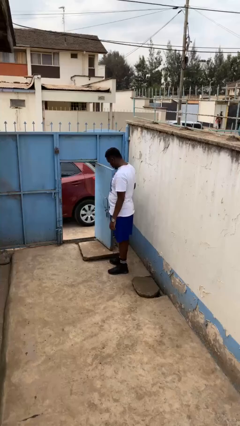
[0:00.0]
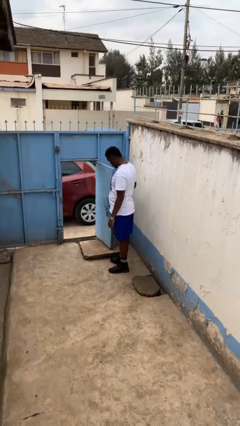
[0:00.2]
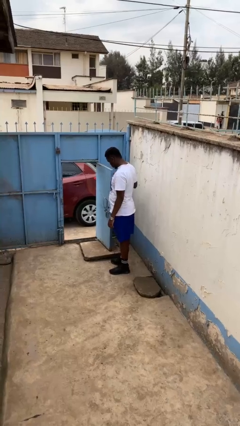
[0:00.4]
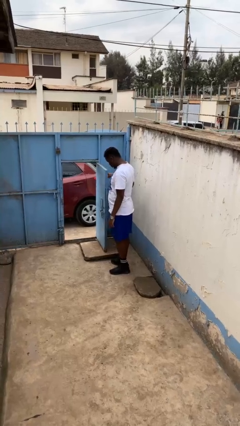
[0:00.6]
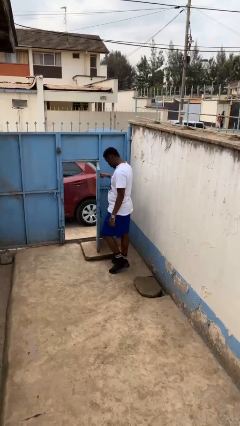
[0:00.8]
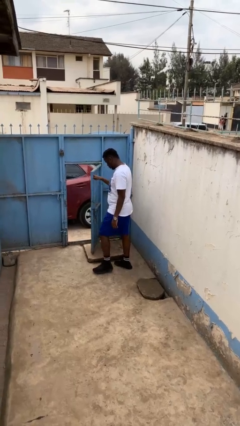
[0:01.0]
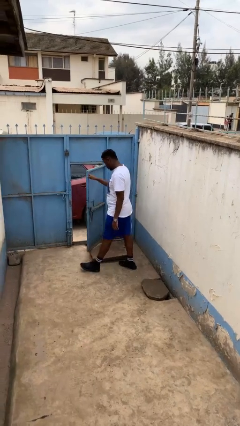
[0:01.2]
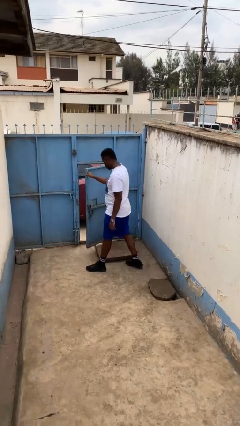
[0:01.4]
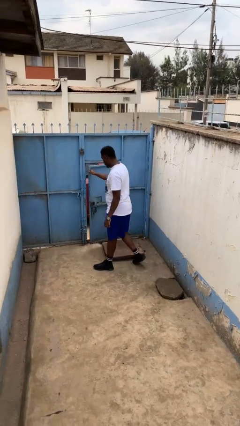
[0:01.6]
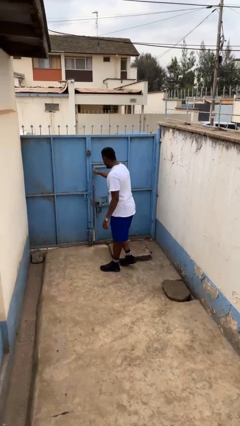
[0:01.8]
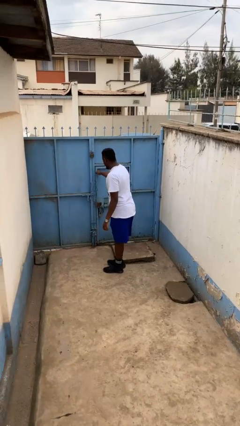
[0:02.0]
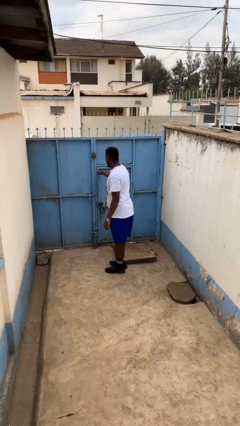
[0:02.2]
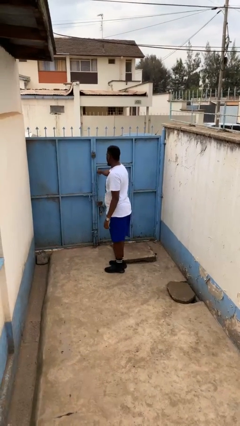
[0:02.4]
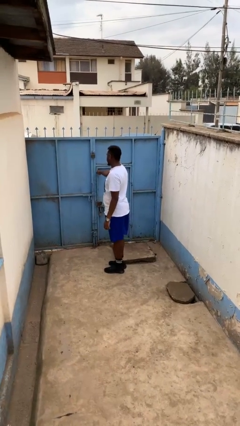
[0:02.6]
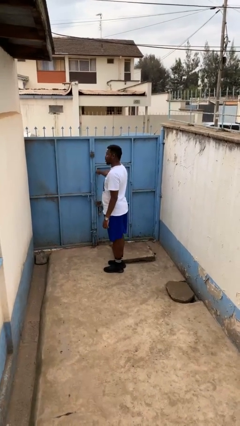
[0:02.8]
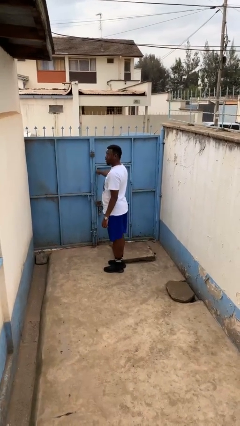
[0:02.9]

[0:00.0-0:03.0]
person closes gate

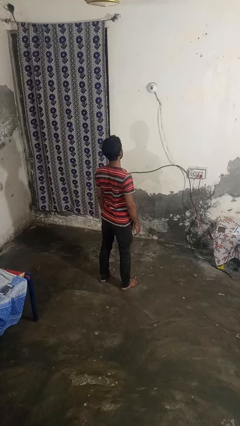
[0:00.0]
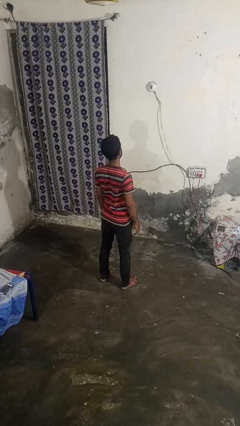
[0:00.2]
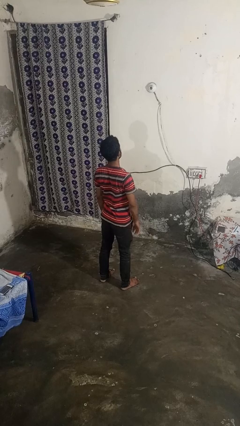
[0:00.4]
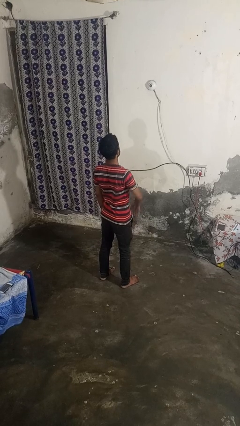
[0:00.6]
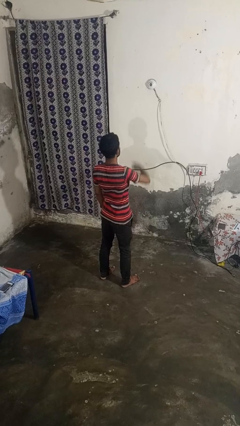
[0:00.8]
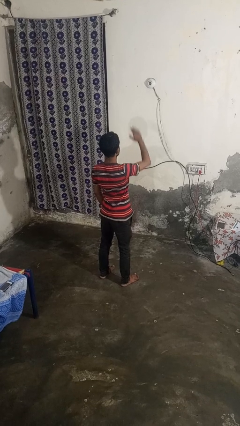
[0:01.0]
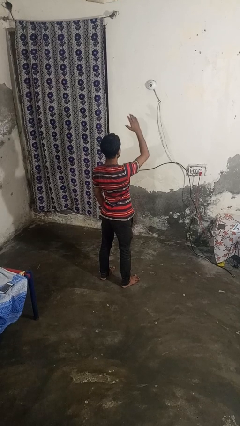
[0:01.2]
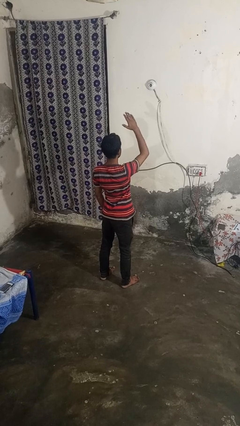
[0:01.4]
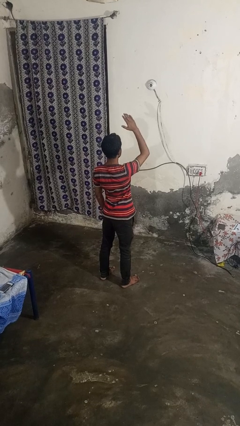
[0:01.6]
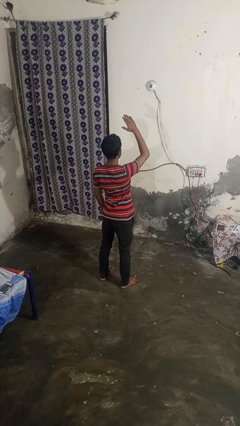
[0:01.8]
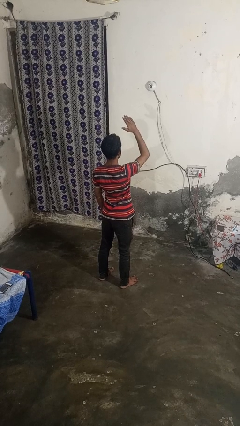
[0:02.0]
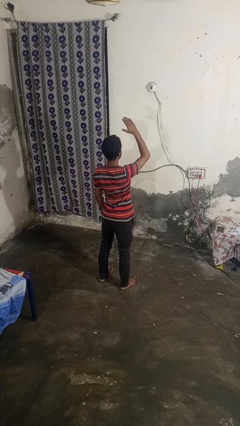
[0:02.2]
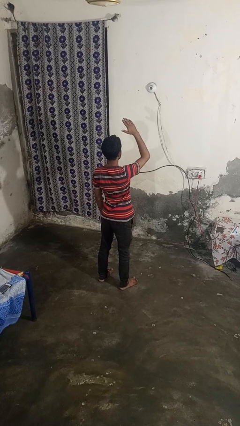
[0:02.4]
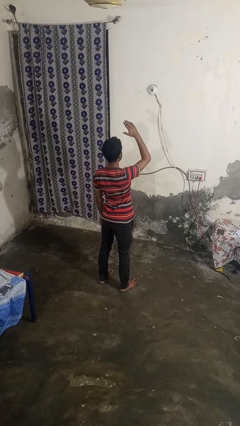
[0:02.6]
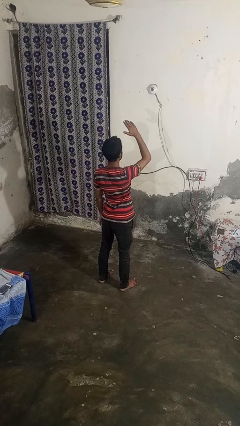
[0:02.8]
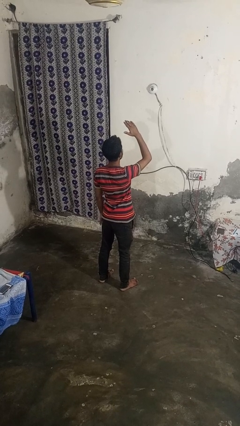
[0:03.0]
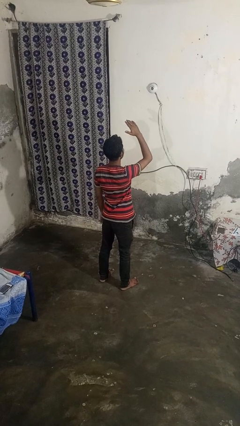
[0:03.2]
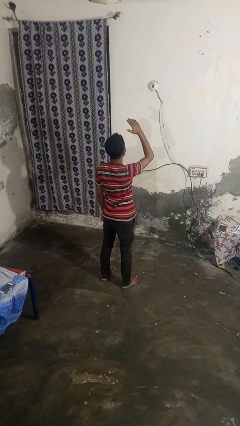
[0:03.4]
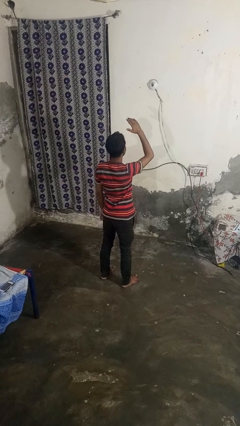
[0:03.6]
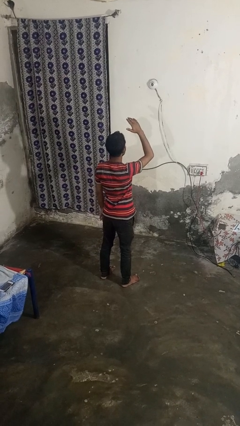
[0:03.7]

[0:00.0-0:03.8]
person gestures swipe up

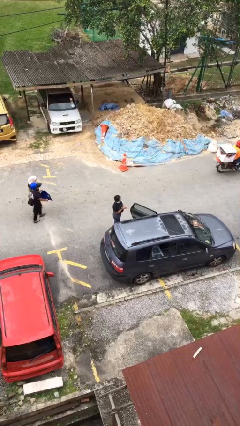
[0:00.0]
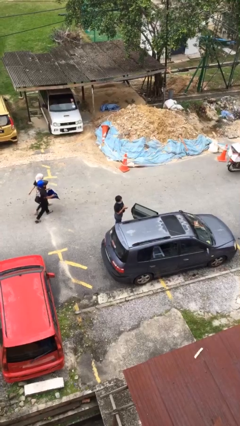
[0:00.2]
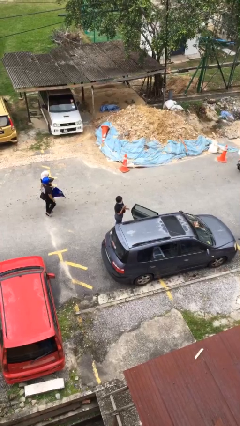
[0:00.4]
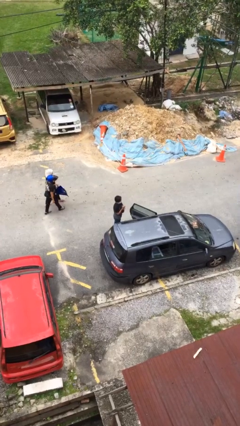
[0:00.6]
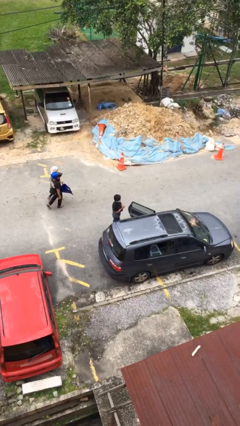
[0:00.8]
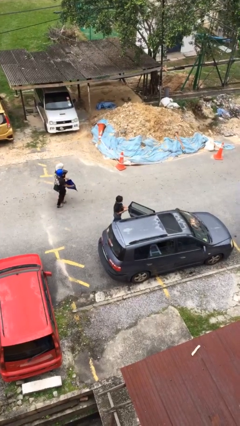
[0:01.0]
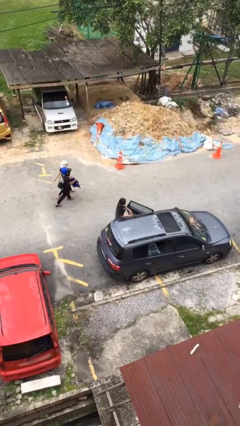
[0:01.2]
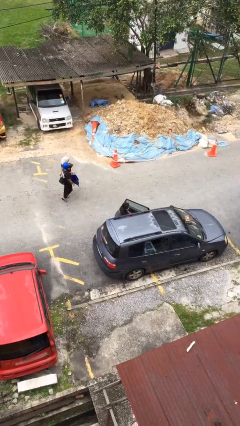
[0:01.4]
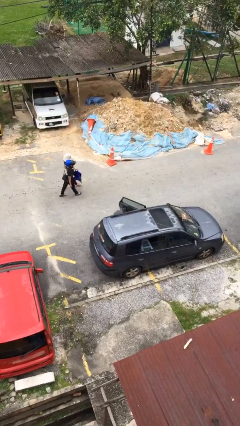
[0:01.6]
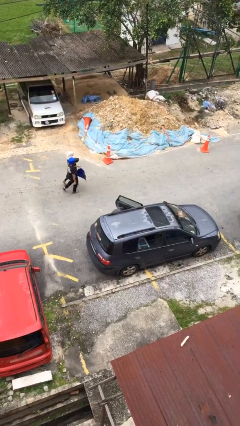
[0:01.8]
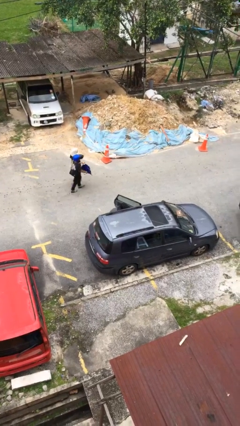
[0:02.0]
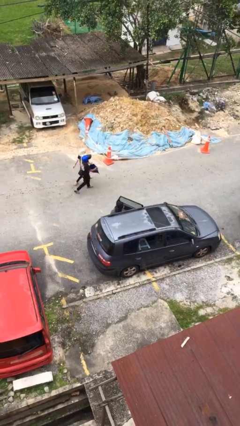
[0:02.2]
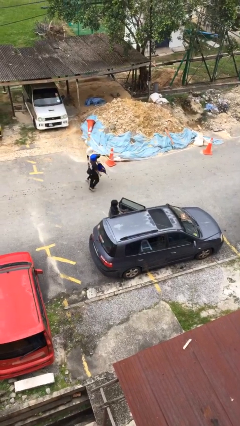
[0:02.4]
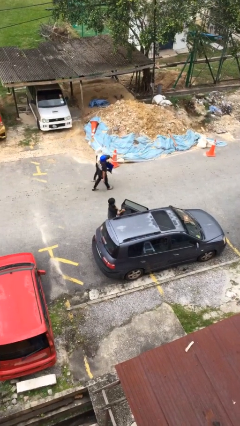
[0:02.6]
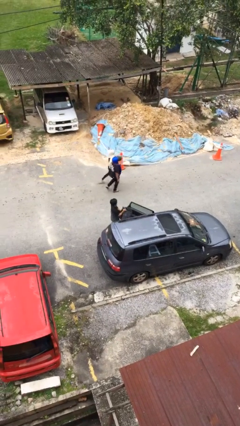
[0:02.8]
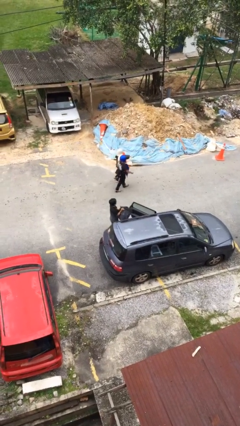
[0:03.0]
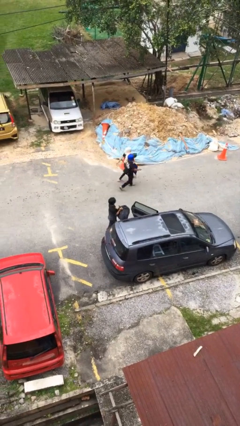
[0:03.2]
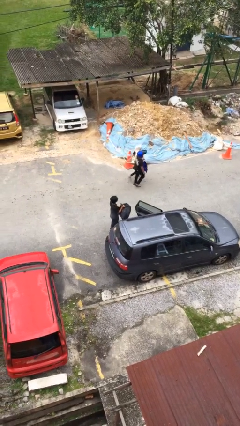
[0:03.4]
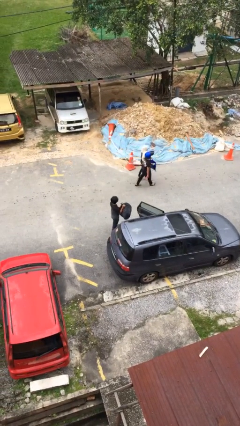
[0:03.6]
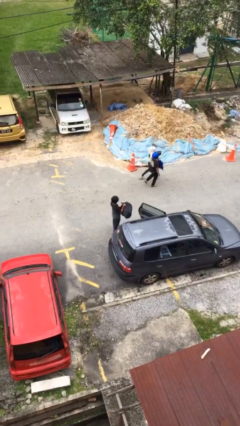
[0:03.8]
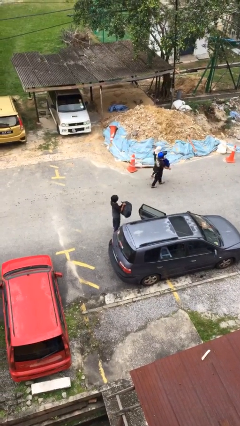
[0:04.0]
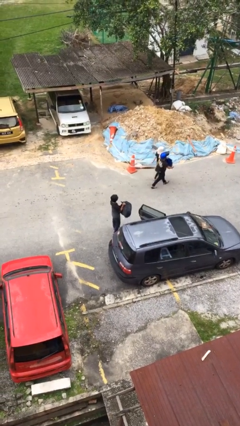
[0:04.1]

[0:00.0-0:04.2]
person unloads car

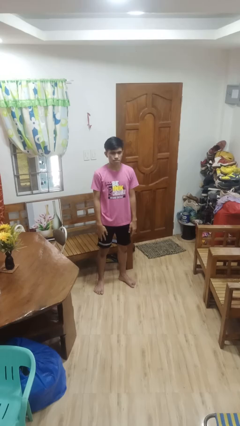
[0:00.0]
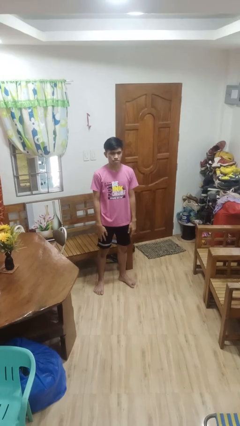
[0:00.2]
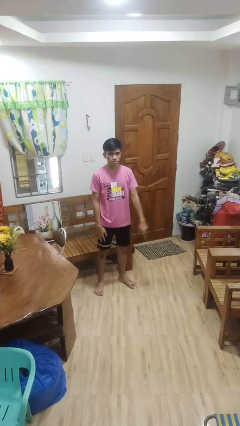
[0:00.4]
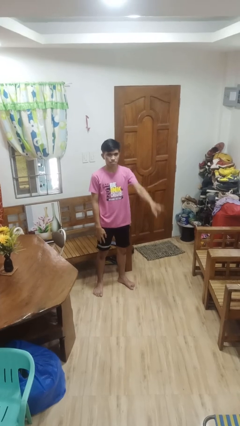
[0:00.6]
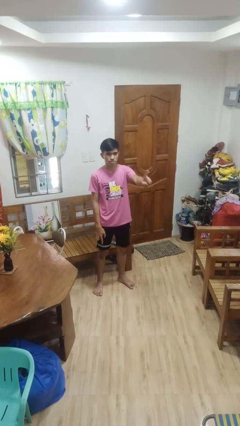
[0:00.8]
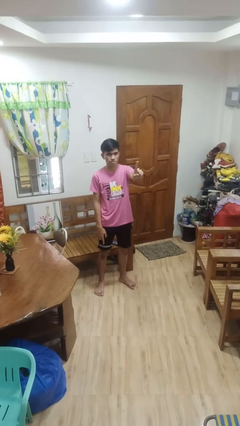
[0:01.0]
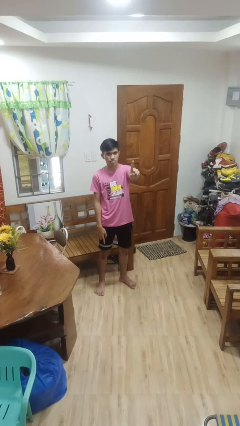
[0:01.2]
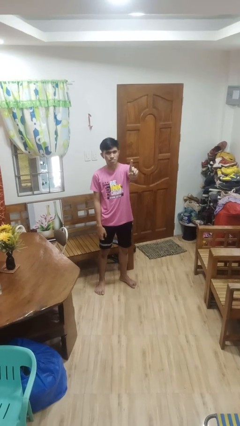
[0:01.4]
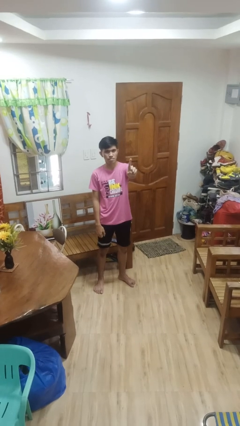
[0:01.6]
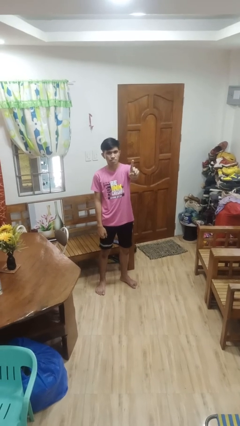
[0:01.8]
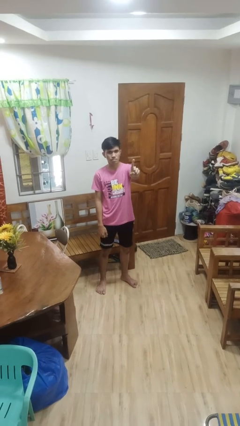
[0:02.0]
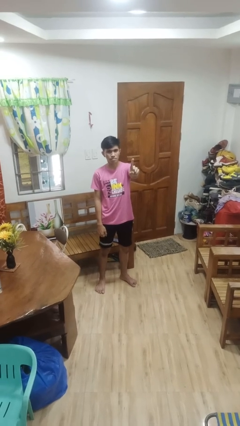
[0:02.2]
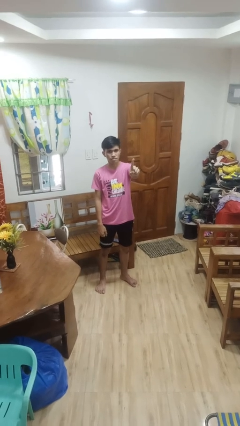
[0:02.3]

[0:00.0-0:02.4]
person gestures number one

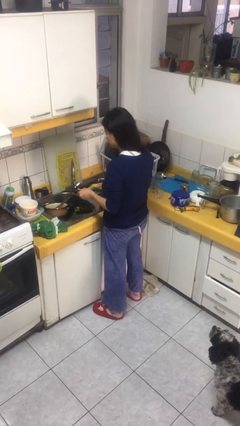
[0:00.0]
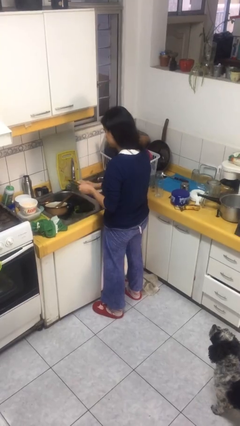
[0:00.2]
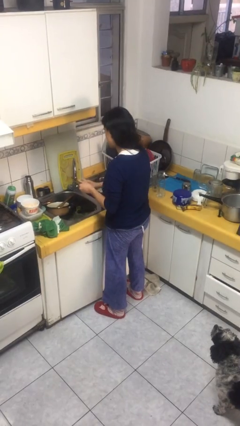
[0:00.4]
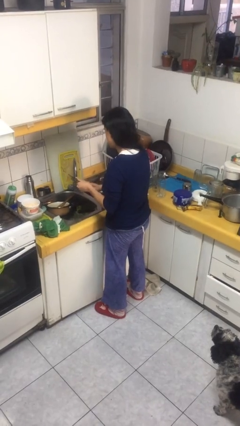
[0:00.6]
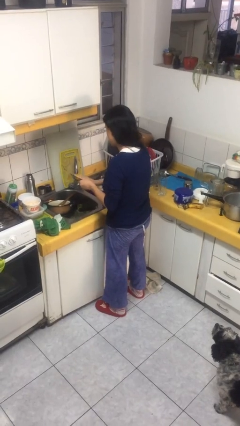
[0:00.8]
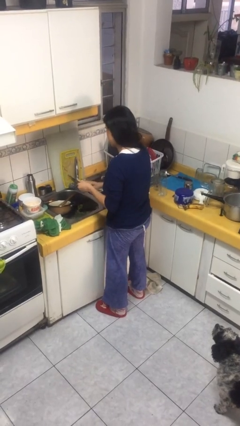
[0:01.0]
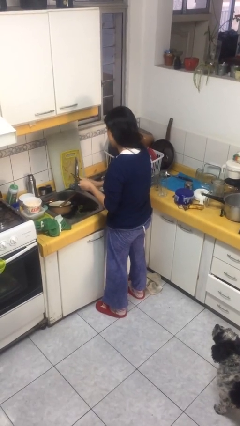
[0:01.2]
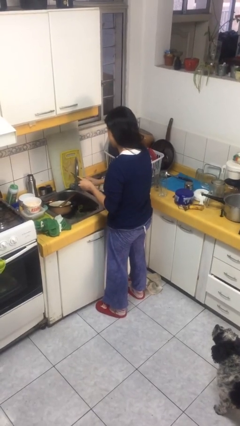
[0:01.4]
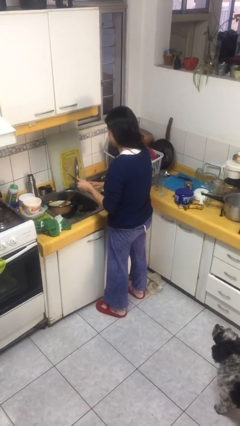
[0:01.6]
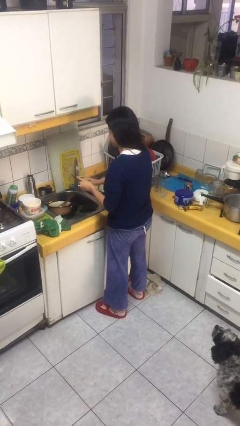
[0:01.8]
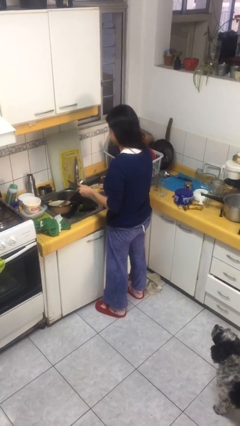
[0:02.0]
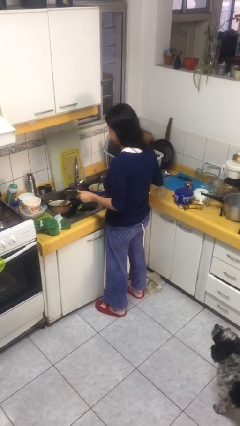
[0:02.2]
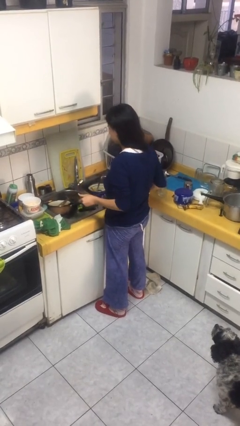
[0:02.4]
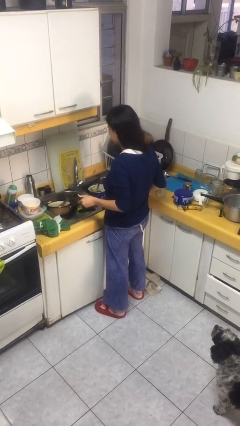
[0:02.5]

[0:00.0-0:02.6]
person washes dish

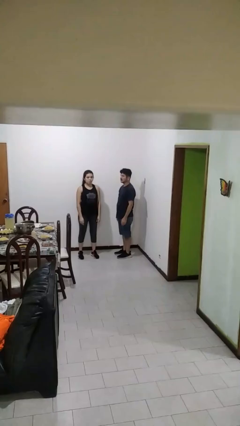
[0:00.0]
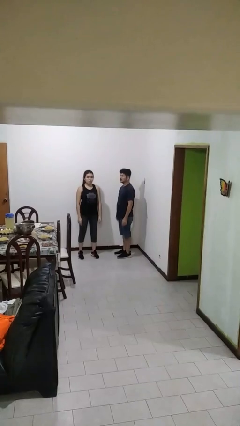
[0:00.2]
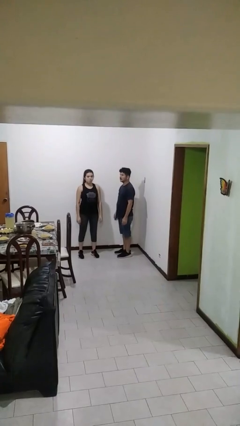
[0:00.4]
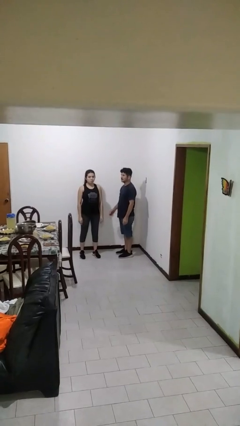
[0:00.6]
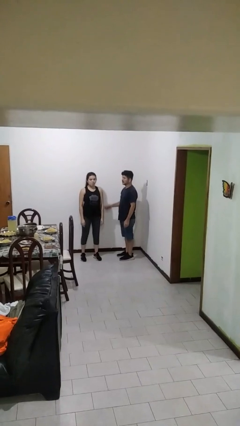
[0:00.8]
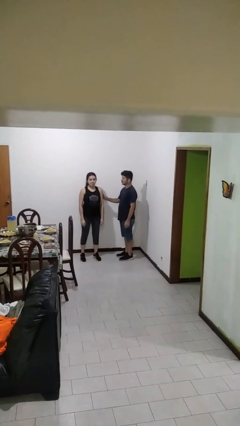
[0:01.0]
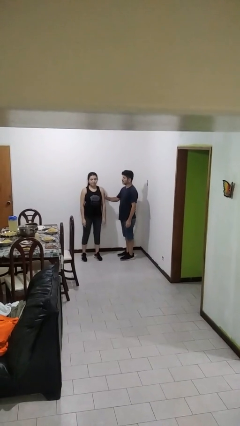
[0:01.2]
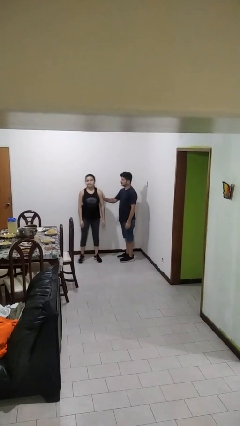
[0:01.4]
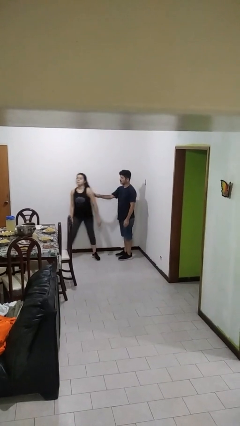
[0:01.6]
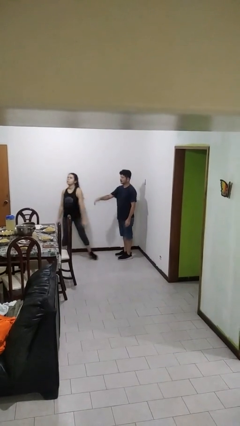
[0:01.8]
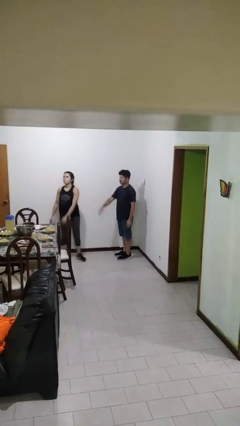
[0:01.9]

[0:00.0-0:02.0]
person shoves person
